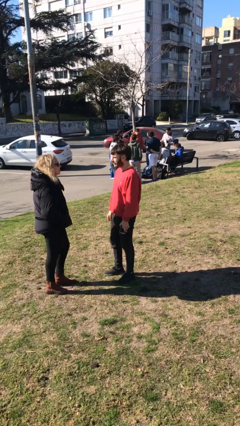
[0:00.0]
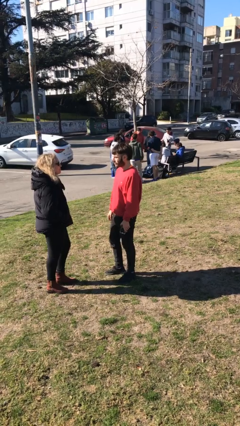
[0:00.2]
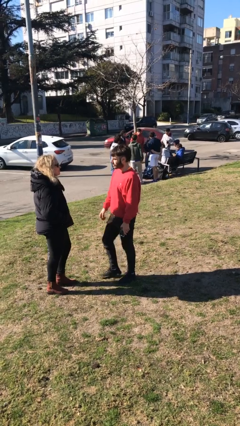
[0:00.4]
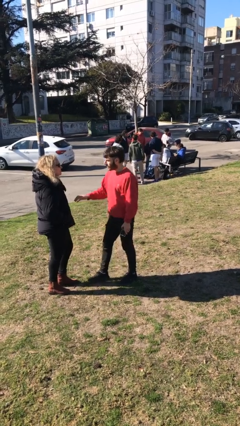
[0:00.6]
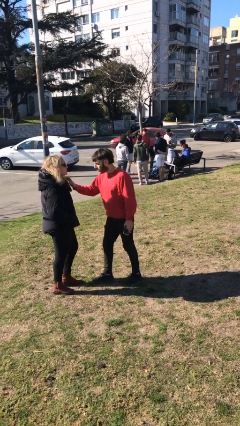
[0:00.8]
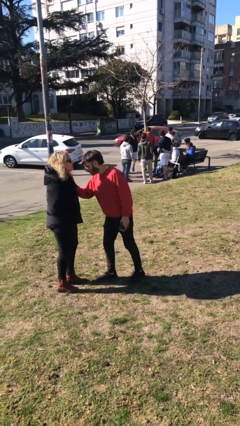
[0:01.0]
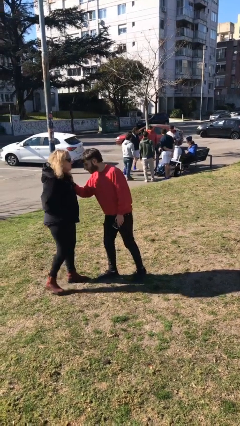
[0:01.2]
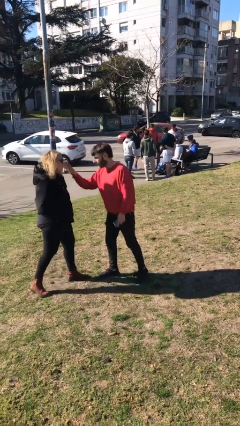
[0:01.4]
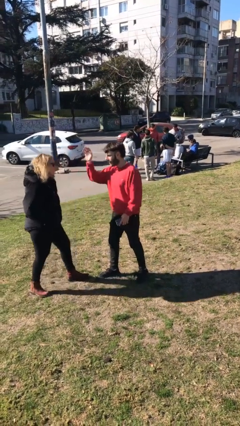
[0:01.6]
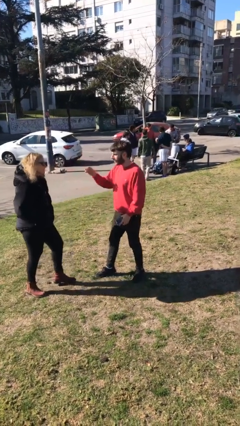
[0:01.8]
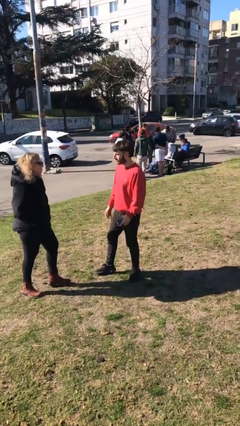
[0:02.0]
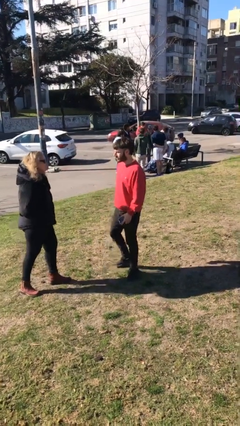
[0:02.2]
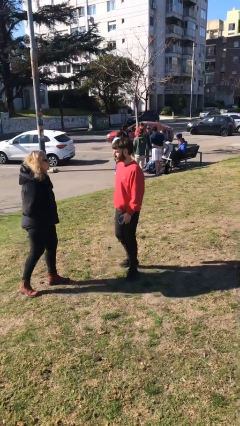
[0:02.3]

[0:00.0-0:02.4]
person shoves person

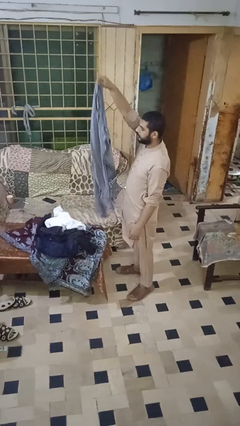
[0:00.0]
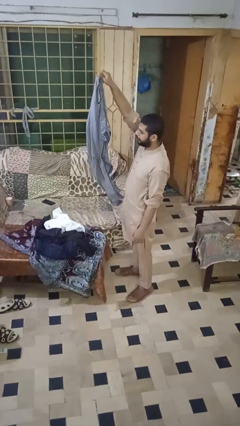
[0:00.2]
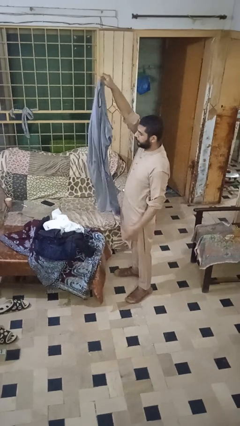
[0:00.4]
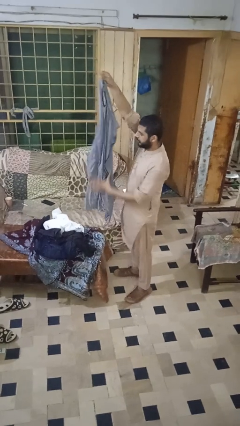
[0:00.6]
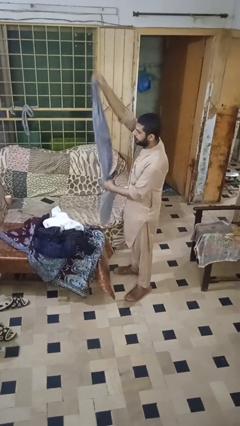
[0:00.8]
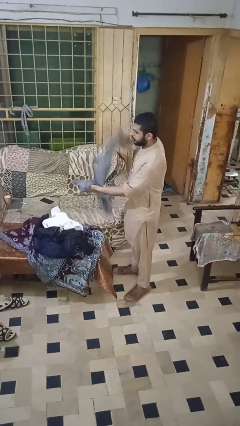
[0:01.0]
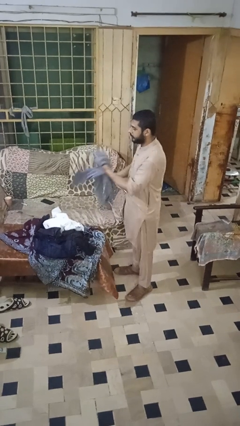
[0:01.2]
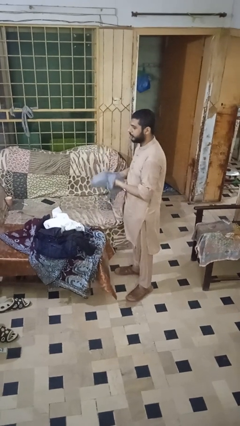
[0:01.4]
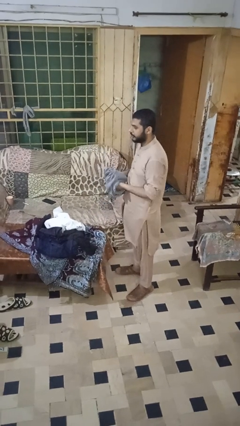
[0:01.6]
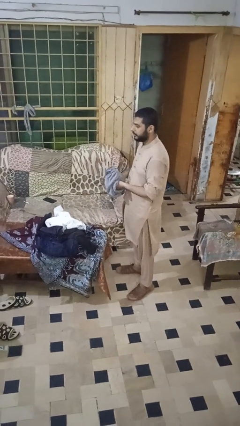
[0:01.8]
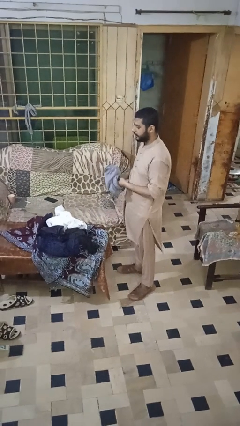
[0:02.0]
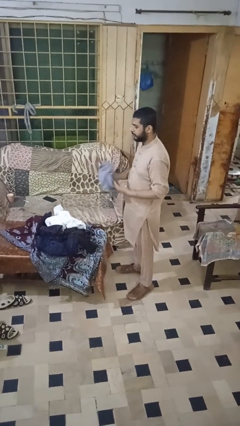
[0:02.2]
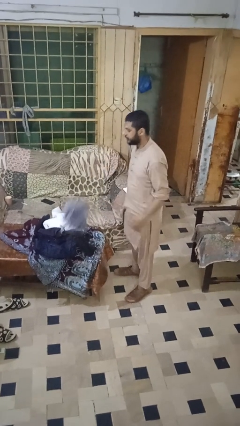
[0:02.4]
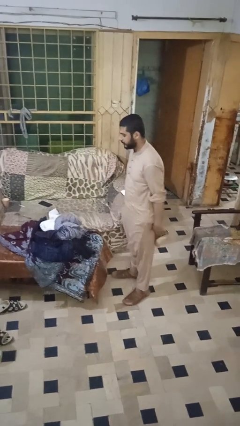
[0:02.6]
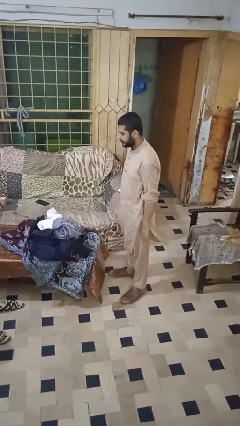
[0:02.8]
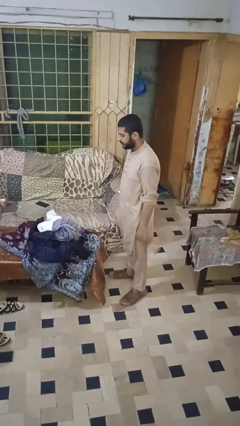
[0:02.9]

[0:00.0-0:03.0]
person folds pants

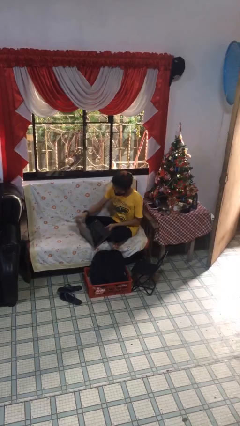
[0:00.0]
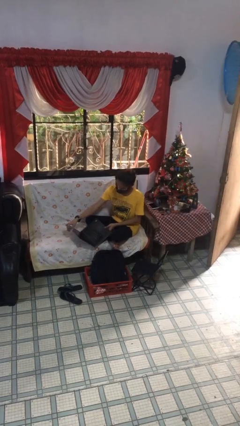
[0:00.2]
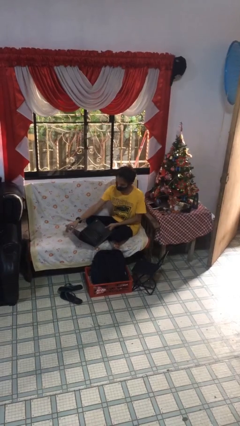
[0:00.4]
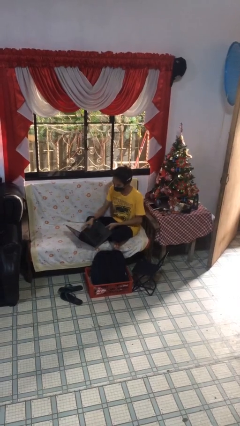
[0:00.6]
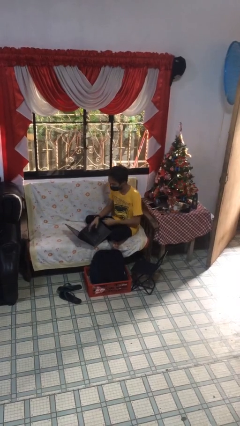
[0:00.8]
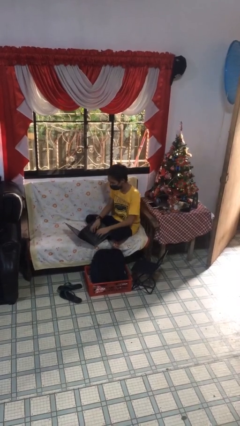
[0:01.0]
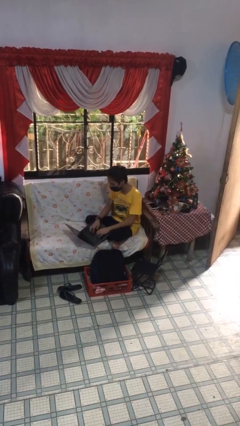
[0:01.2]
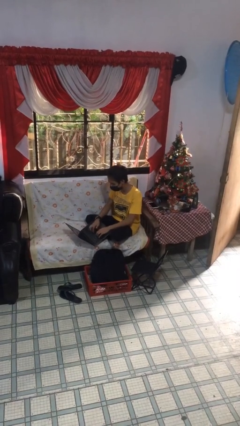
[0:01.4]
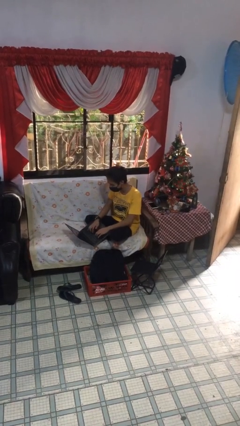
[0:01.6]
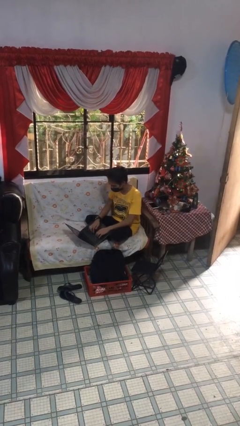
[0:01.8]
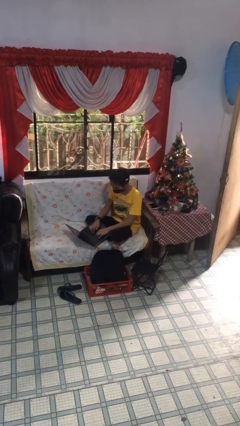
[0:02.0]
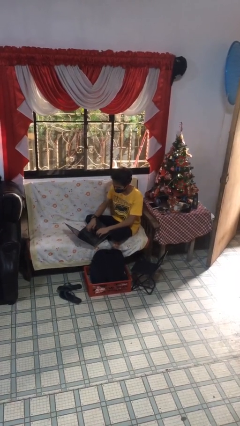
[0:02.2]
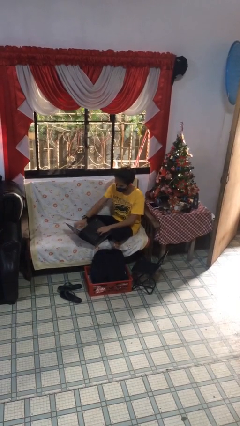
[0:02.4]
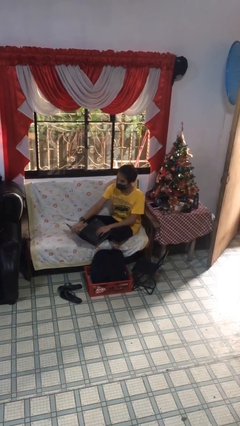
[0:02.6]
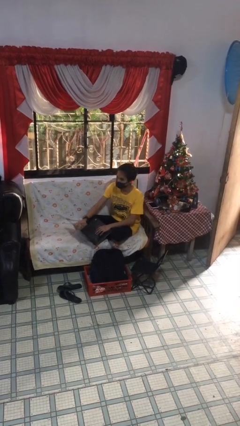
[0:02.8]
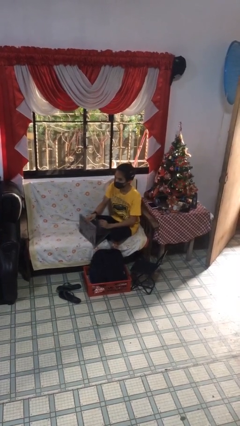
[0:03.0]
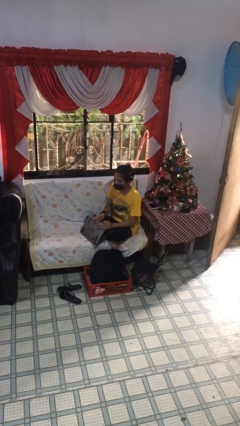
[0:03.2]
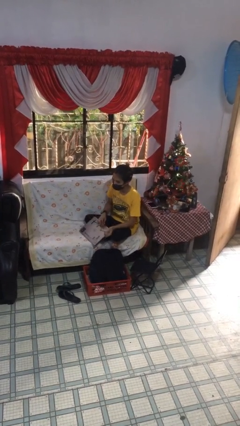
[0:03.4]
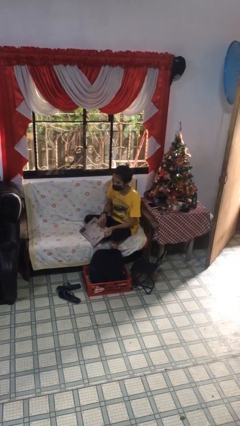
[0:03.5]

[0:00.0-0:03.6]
person interacts with laptop

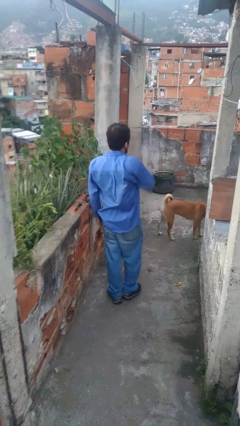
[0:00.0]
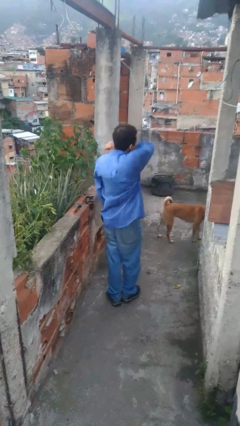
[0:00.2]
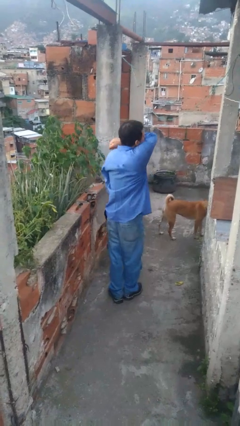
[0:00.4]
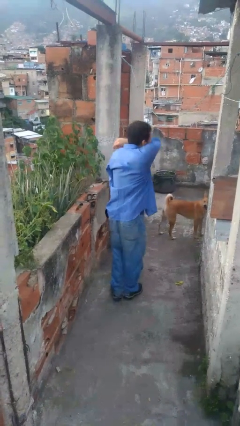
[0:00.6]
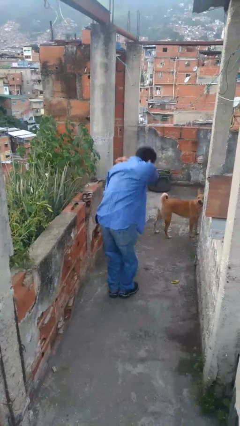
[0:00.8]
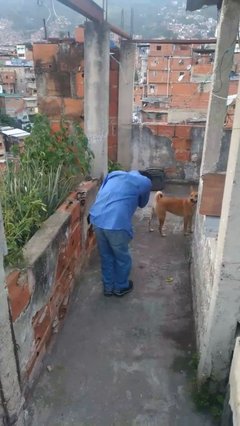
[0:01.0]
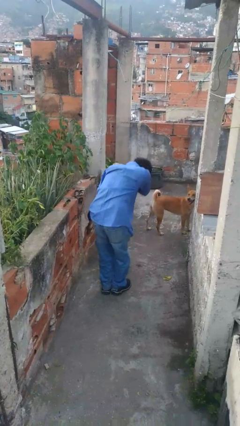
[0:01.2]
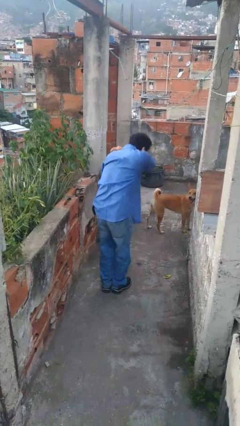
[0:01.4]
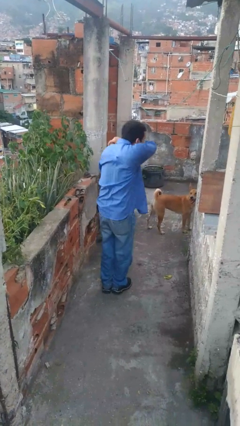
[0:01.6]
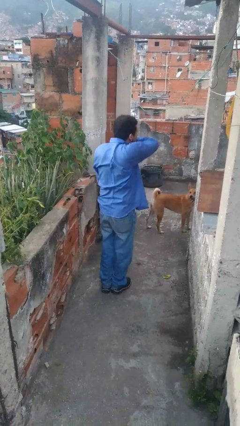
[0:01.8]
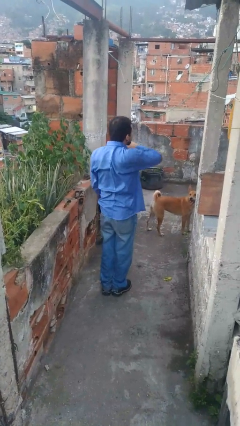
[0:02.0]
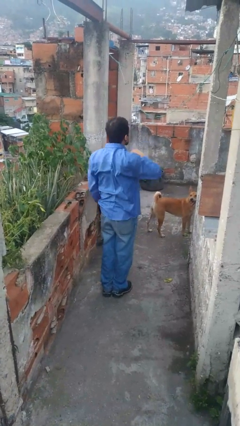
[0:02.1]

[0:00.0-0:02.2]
person sneezes into arm

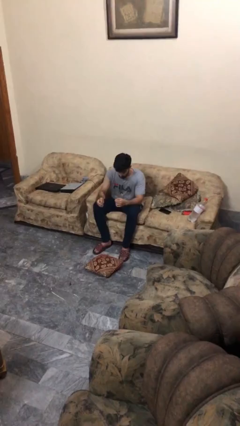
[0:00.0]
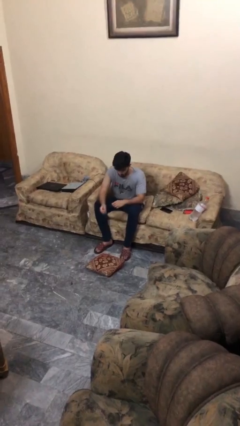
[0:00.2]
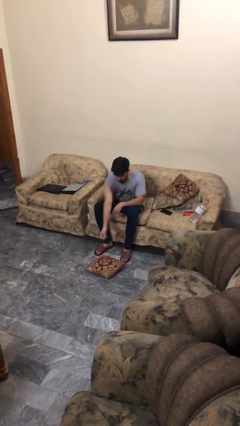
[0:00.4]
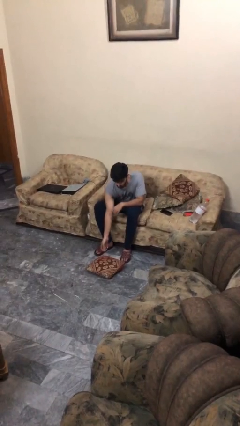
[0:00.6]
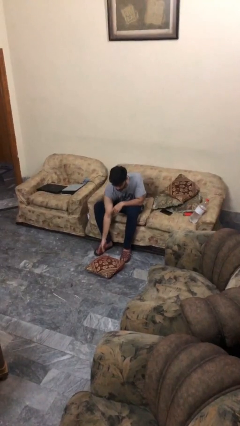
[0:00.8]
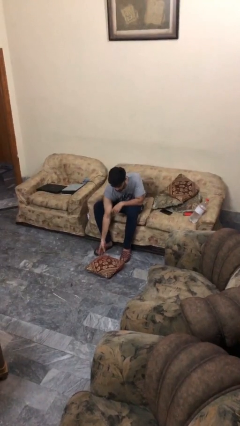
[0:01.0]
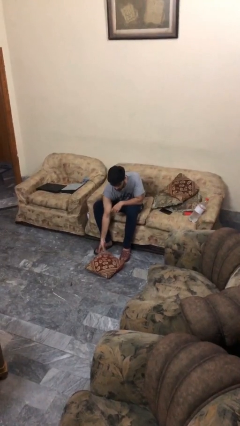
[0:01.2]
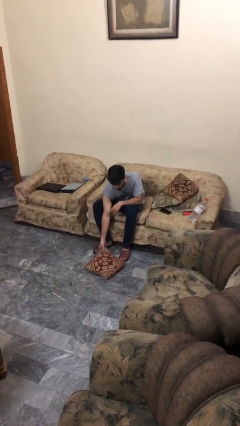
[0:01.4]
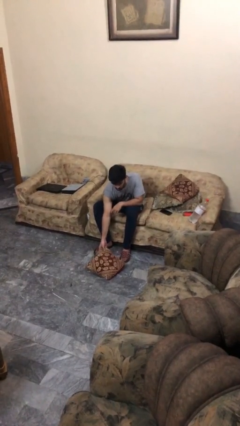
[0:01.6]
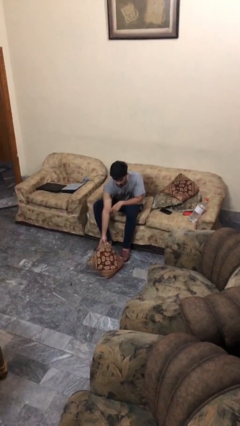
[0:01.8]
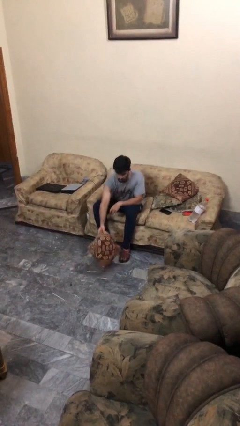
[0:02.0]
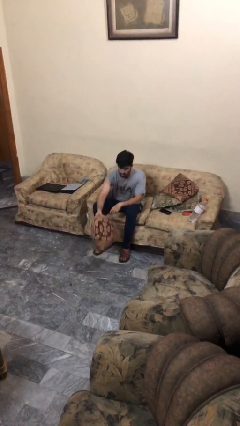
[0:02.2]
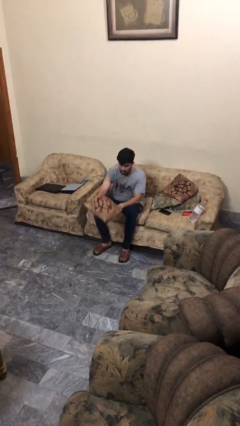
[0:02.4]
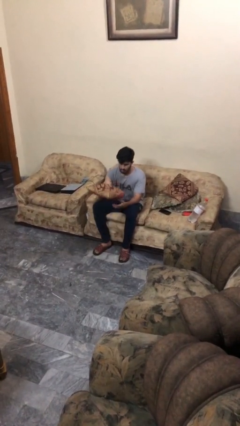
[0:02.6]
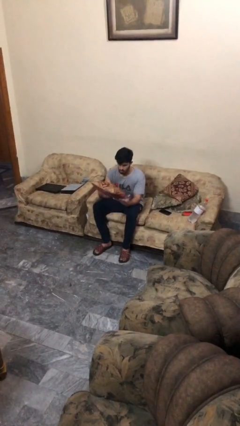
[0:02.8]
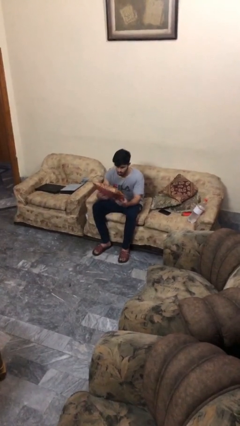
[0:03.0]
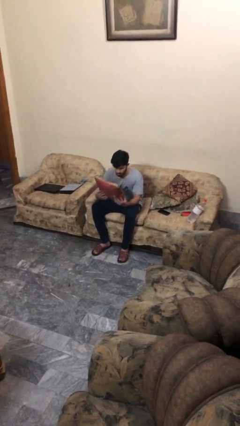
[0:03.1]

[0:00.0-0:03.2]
person picks up object from floor

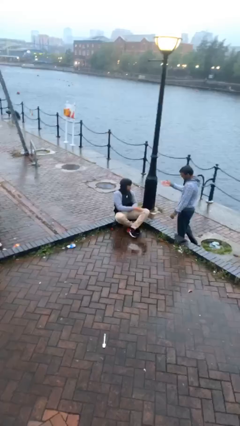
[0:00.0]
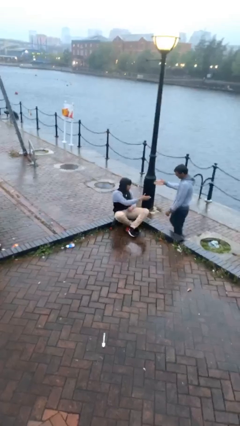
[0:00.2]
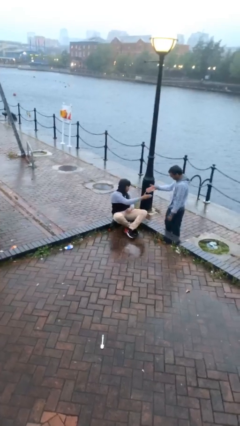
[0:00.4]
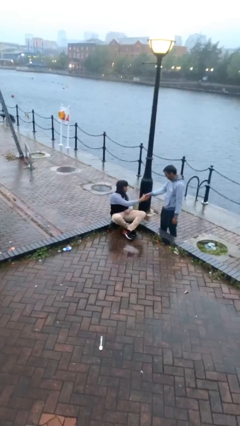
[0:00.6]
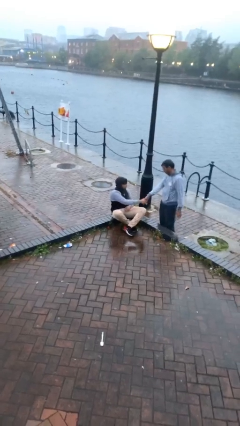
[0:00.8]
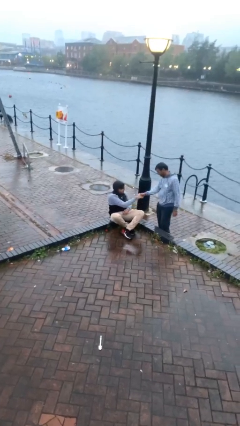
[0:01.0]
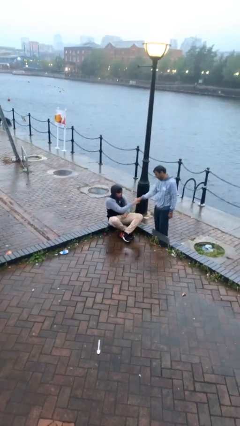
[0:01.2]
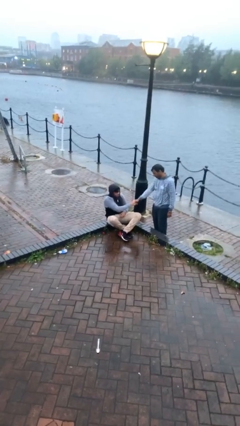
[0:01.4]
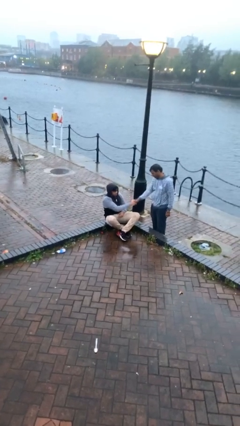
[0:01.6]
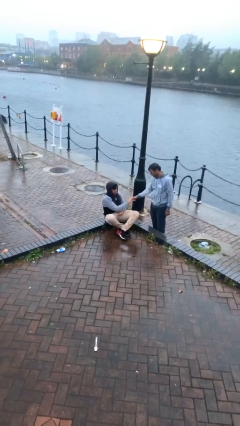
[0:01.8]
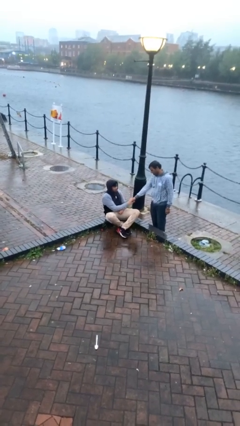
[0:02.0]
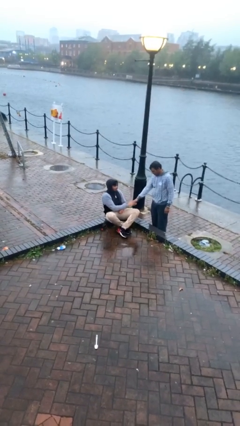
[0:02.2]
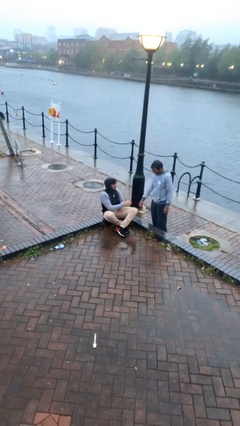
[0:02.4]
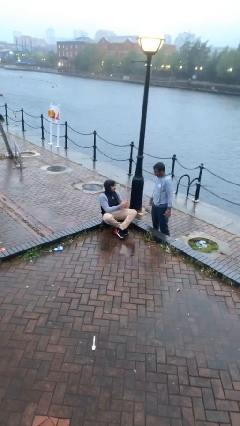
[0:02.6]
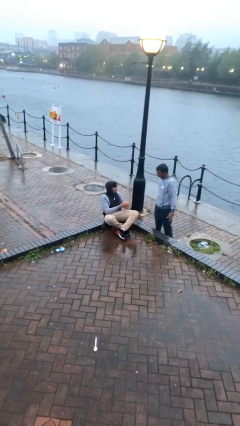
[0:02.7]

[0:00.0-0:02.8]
person shakes hand

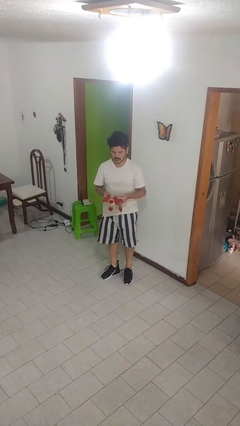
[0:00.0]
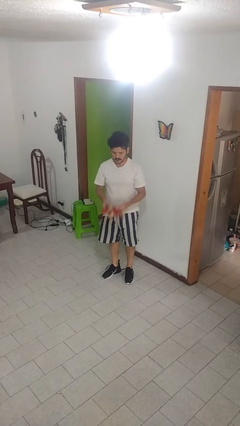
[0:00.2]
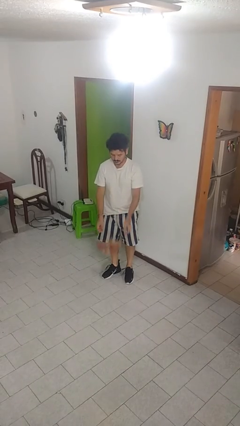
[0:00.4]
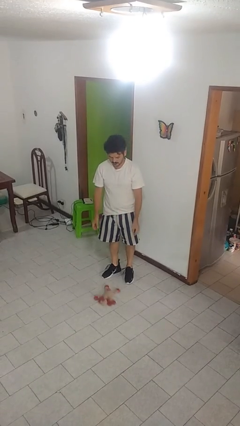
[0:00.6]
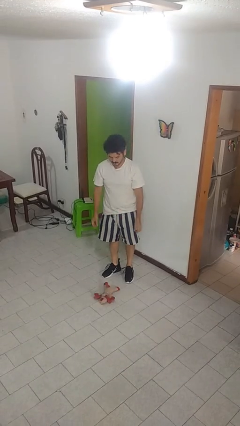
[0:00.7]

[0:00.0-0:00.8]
person throws object to ground
